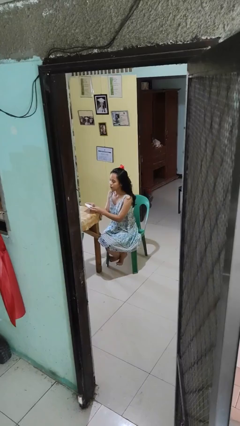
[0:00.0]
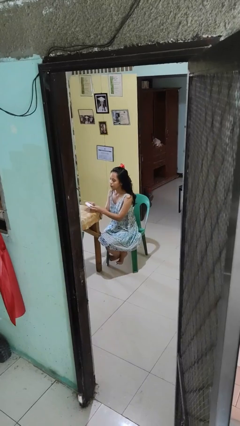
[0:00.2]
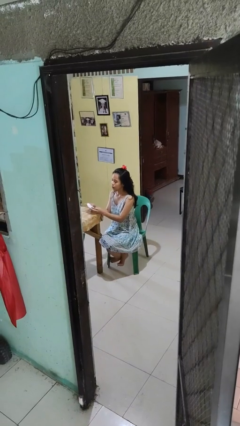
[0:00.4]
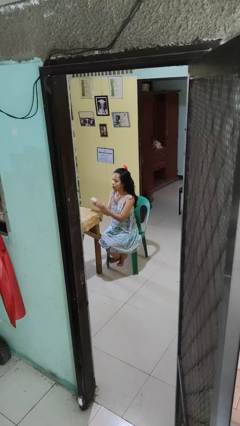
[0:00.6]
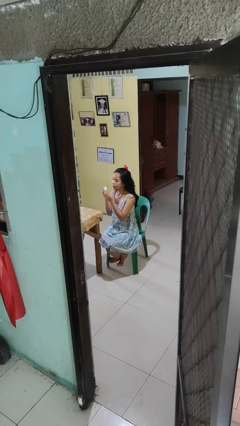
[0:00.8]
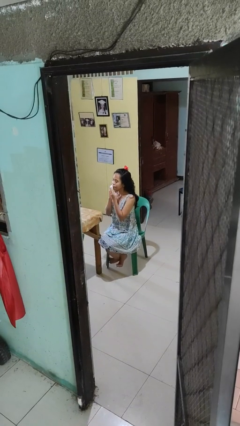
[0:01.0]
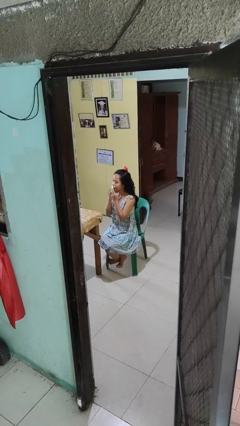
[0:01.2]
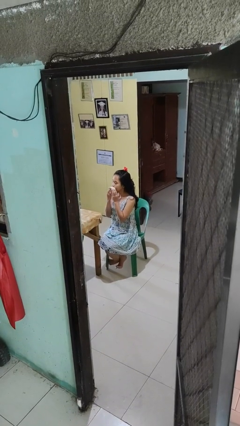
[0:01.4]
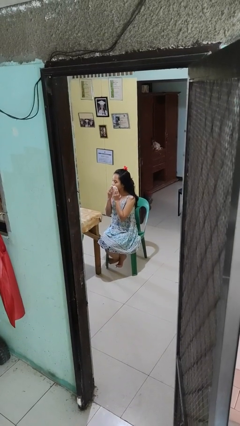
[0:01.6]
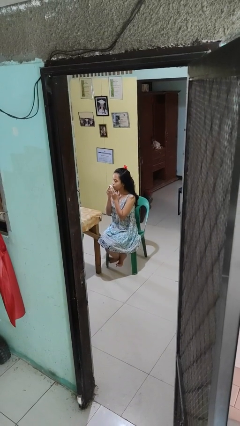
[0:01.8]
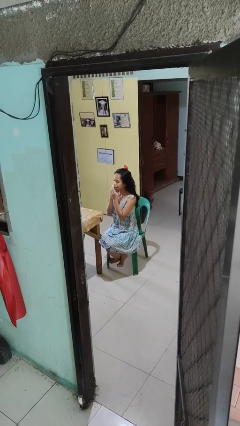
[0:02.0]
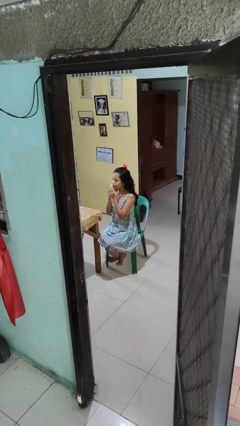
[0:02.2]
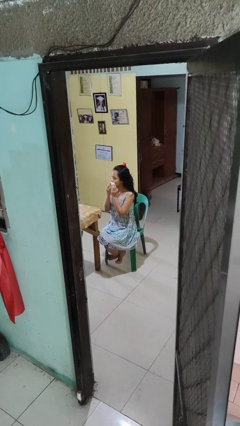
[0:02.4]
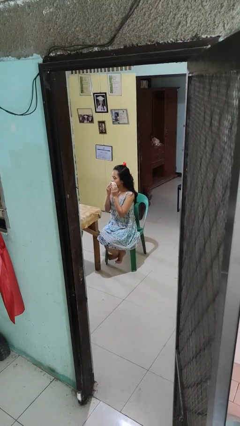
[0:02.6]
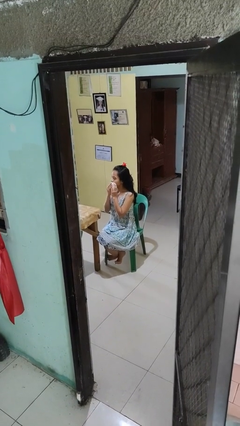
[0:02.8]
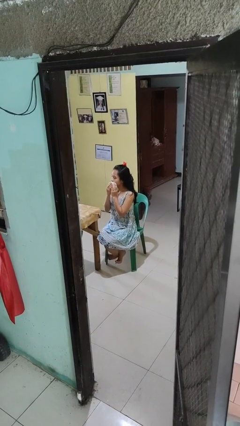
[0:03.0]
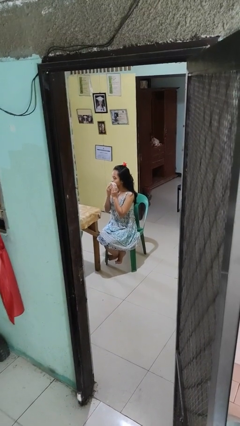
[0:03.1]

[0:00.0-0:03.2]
person wipes mouth with napkin

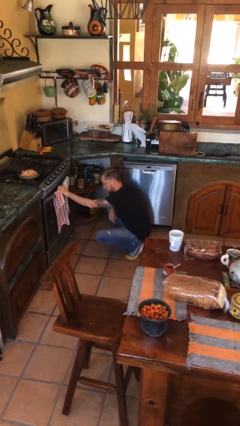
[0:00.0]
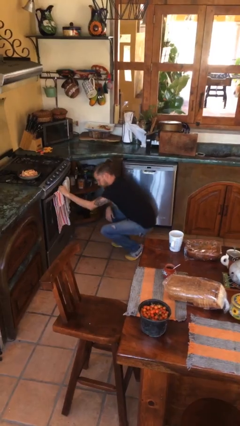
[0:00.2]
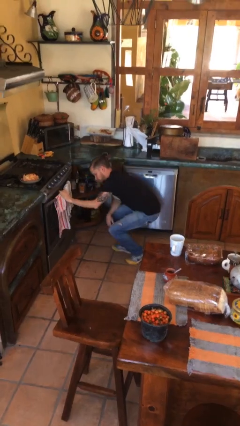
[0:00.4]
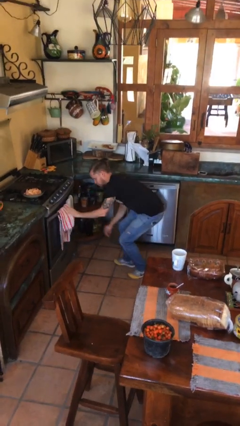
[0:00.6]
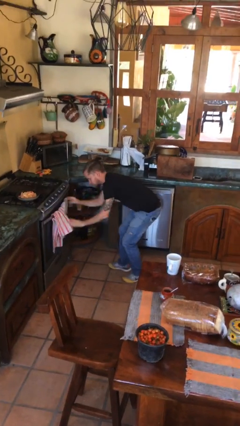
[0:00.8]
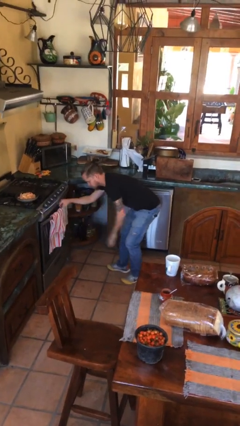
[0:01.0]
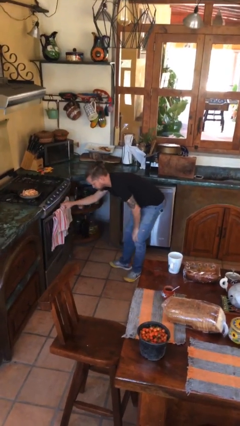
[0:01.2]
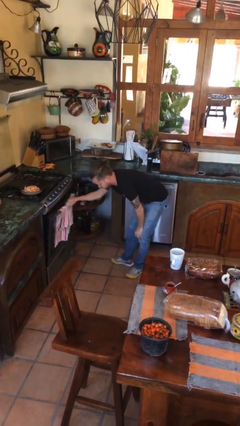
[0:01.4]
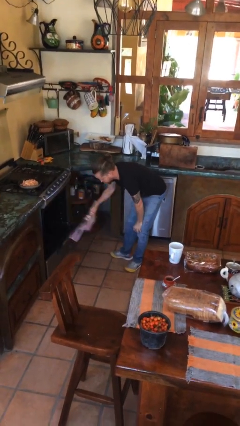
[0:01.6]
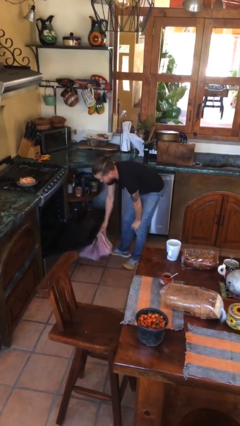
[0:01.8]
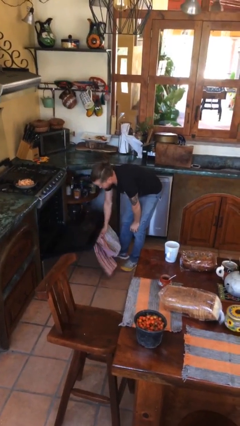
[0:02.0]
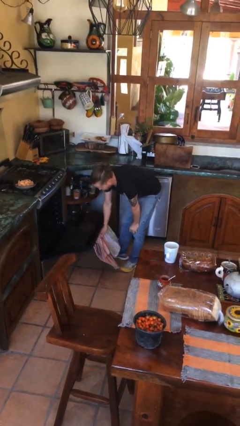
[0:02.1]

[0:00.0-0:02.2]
person opens oven door

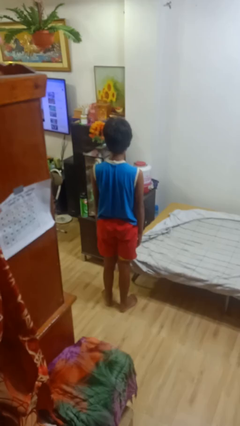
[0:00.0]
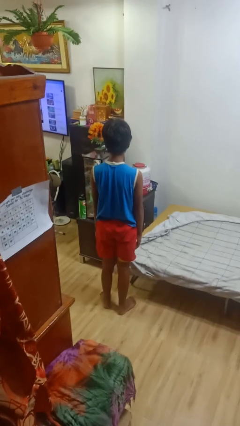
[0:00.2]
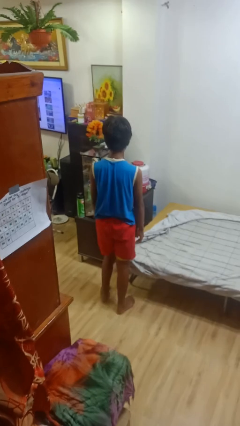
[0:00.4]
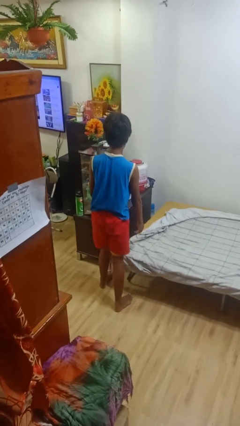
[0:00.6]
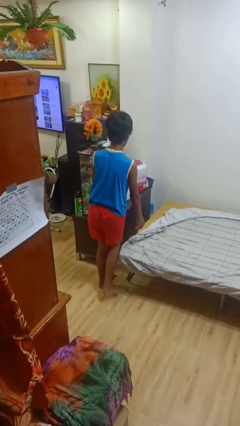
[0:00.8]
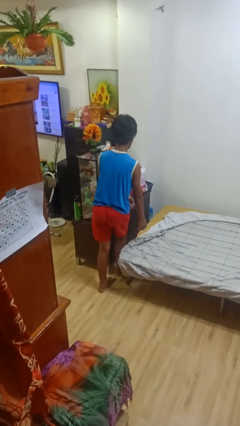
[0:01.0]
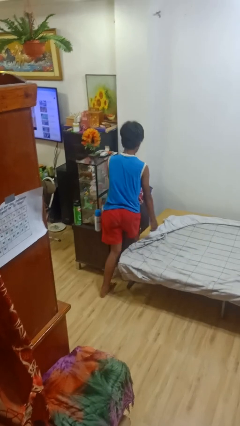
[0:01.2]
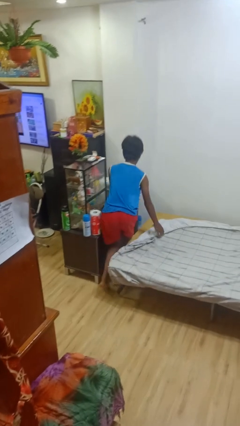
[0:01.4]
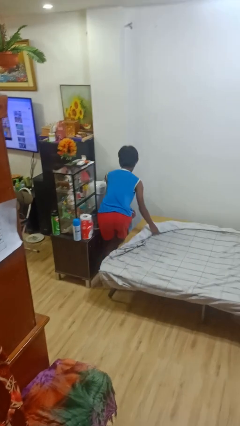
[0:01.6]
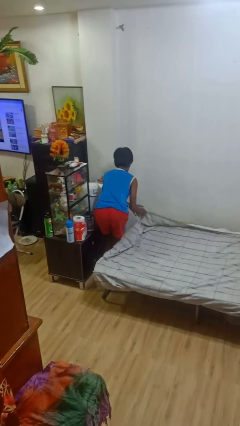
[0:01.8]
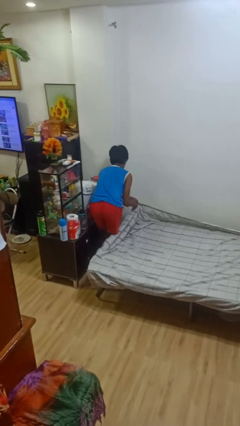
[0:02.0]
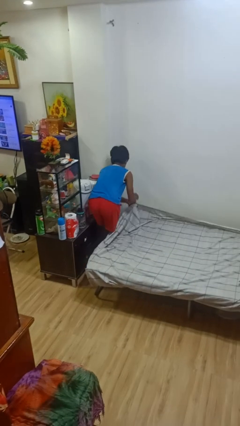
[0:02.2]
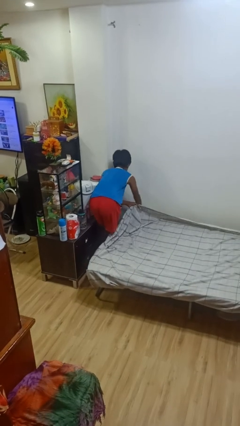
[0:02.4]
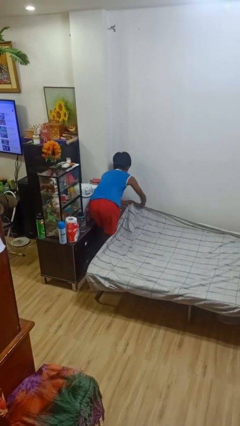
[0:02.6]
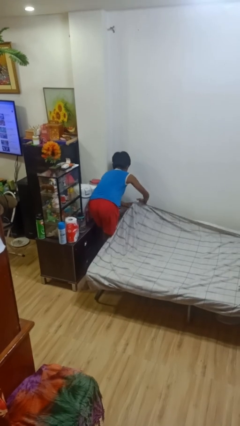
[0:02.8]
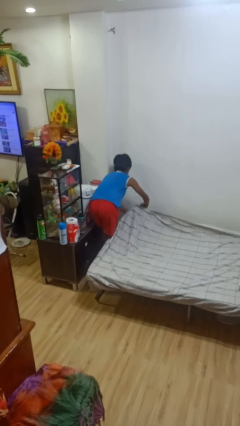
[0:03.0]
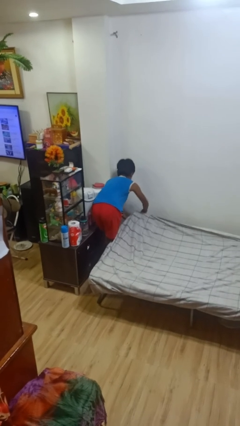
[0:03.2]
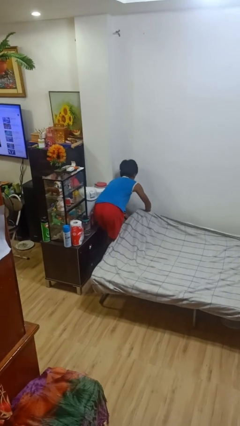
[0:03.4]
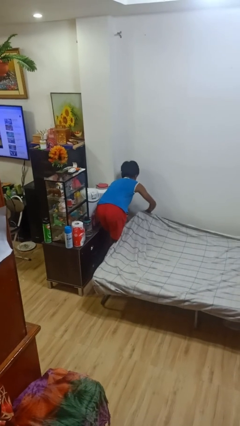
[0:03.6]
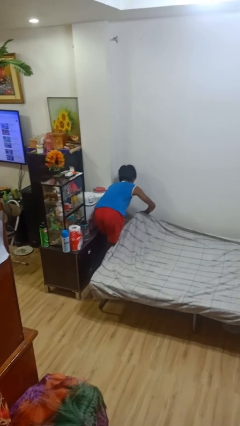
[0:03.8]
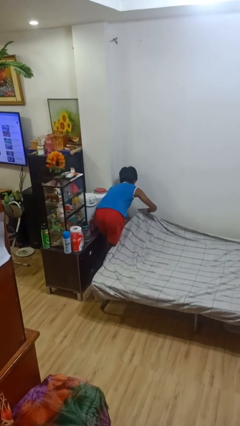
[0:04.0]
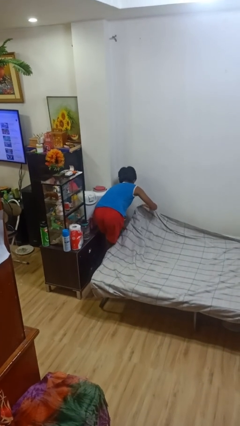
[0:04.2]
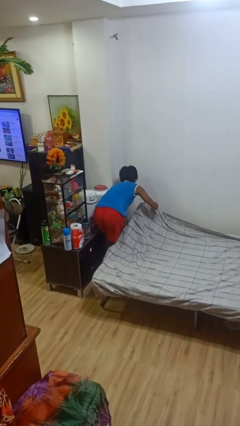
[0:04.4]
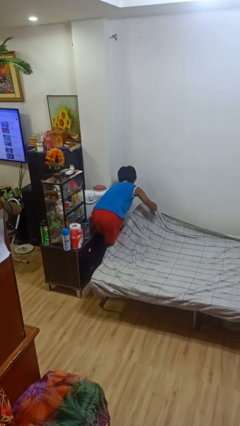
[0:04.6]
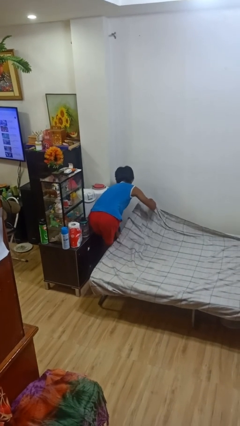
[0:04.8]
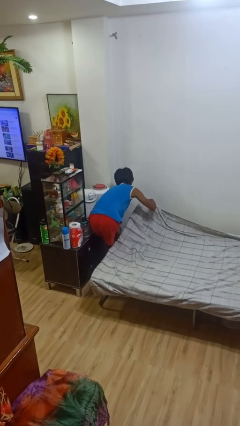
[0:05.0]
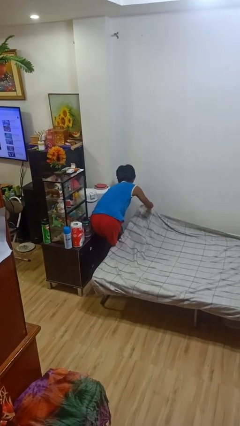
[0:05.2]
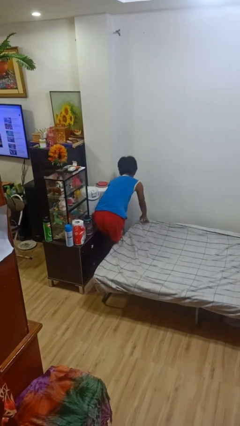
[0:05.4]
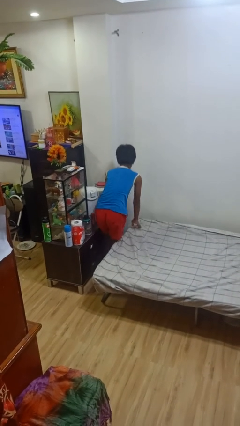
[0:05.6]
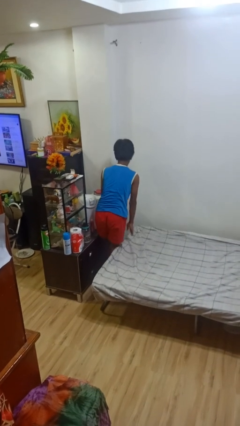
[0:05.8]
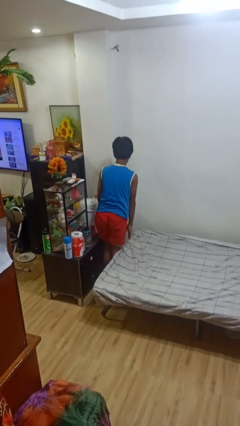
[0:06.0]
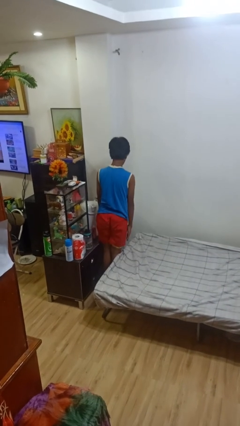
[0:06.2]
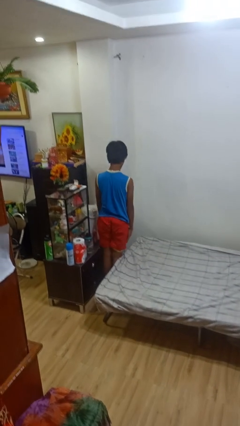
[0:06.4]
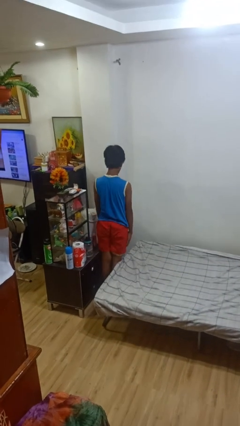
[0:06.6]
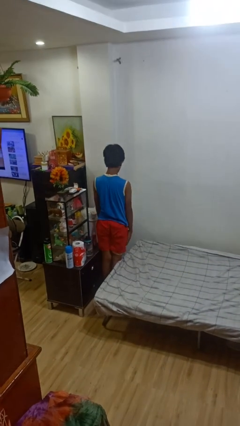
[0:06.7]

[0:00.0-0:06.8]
person makes bed

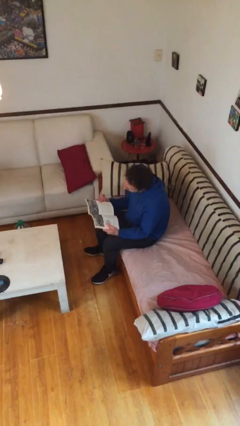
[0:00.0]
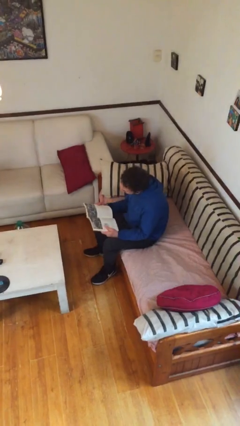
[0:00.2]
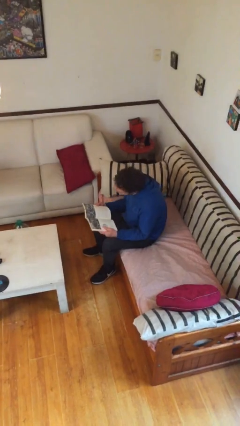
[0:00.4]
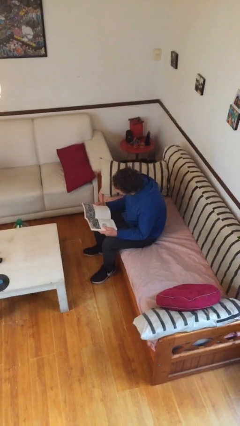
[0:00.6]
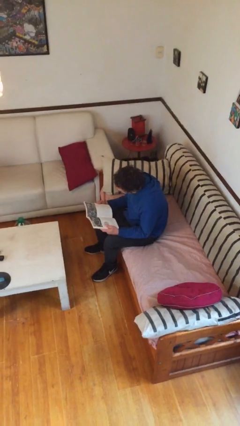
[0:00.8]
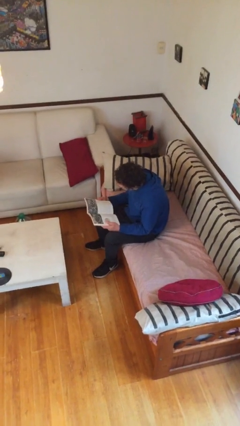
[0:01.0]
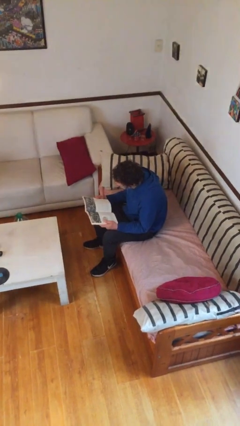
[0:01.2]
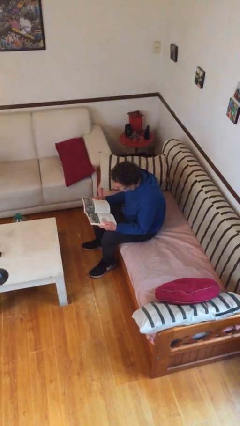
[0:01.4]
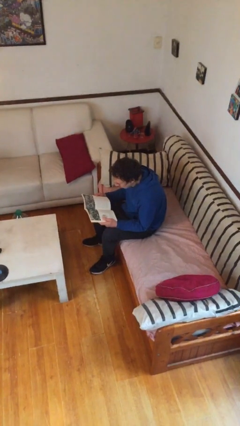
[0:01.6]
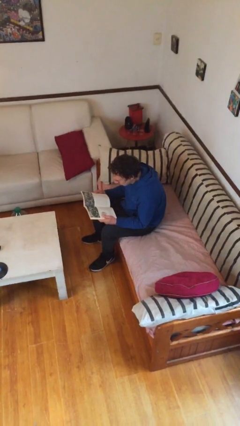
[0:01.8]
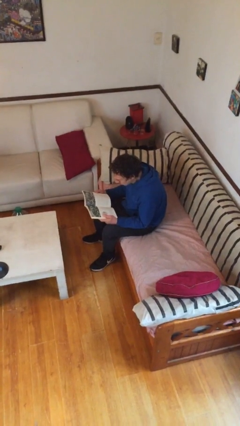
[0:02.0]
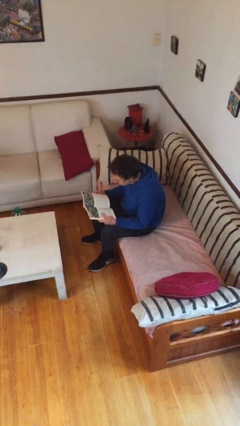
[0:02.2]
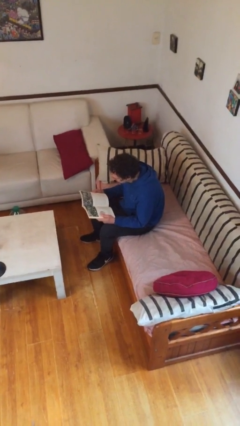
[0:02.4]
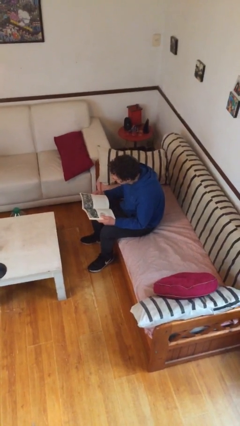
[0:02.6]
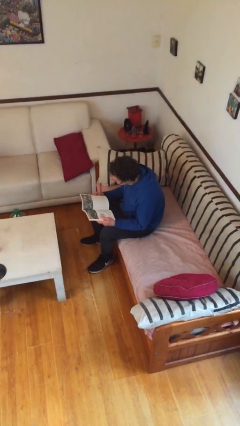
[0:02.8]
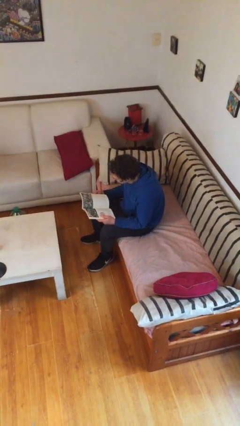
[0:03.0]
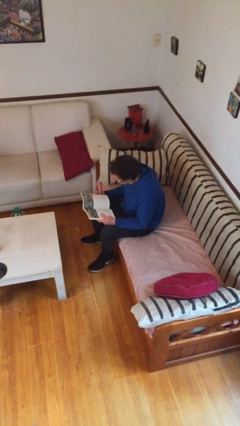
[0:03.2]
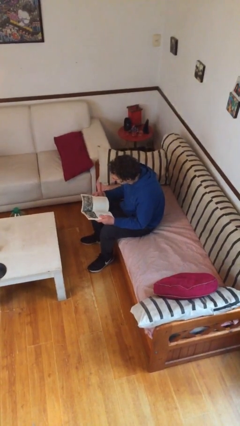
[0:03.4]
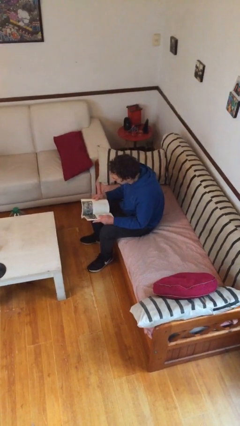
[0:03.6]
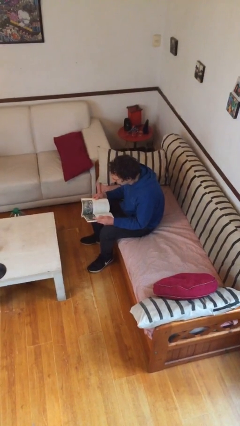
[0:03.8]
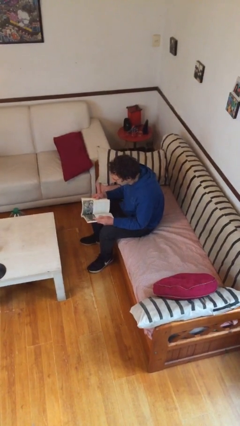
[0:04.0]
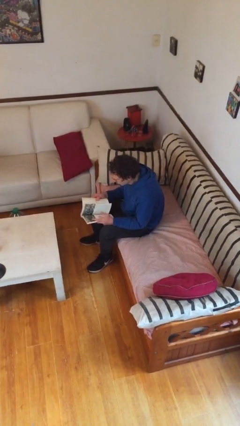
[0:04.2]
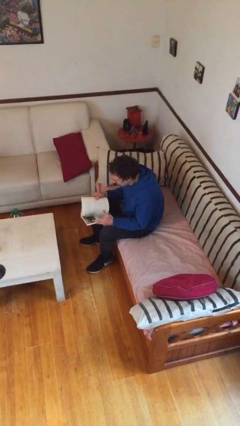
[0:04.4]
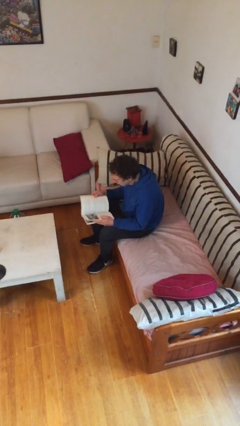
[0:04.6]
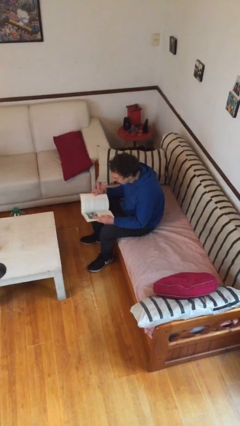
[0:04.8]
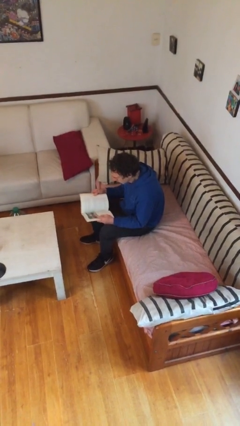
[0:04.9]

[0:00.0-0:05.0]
person reads document

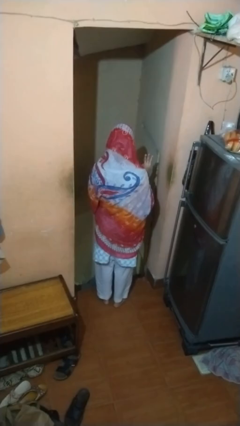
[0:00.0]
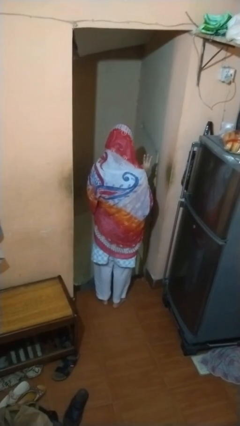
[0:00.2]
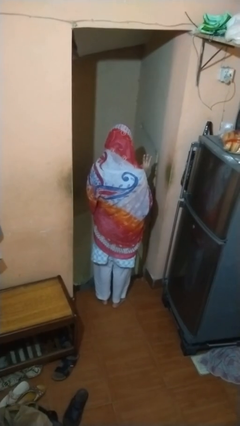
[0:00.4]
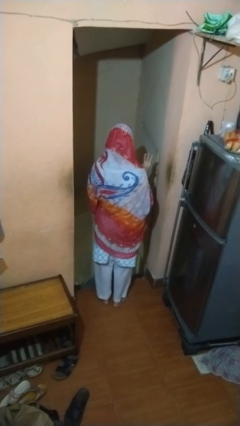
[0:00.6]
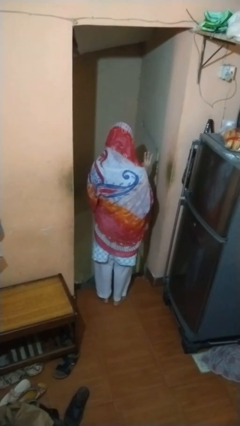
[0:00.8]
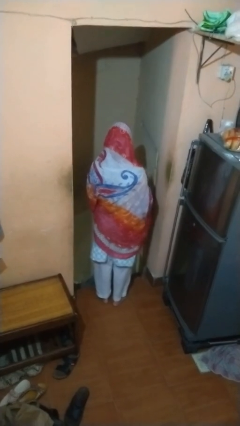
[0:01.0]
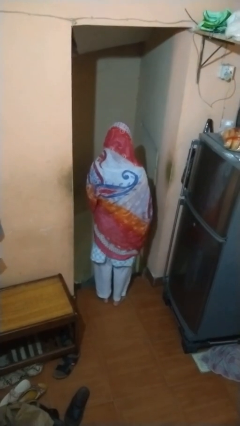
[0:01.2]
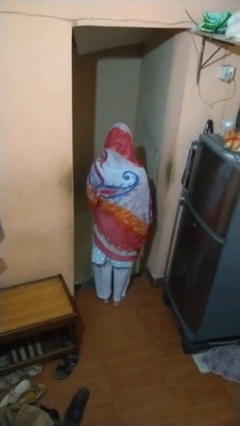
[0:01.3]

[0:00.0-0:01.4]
person gestures number three
